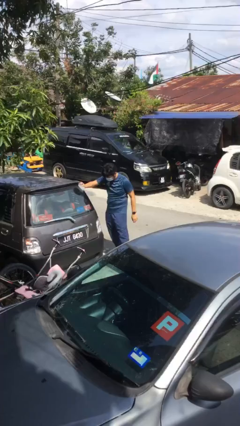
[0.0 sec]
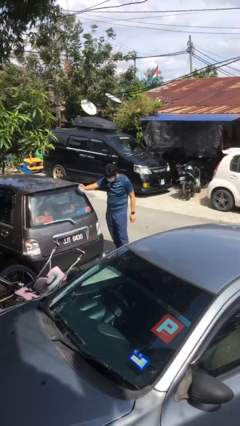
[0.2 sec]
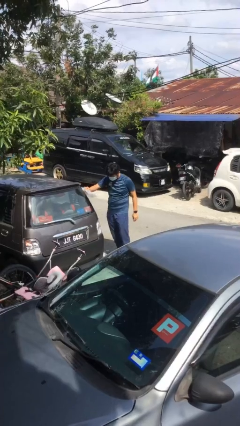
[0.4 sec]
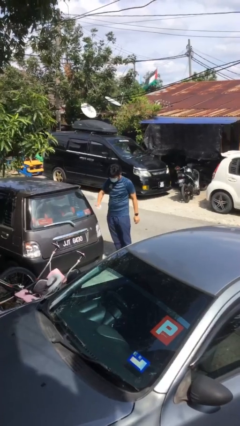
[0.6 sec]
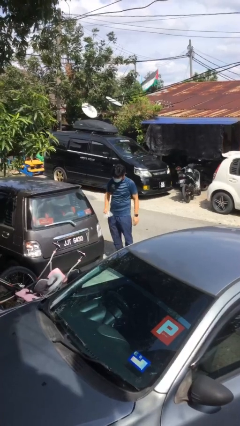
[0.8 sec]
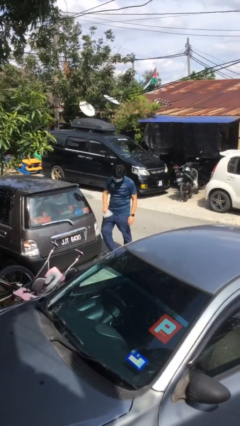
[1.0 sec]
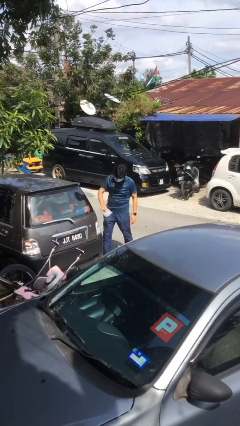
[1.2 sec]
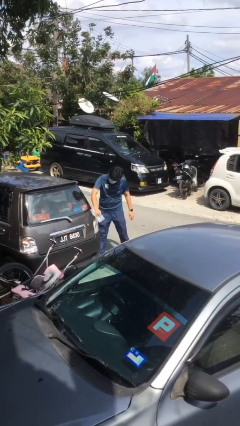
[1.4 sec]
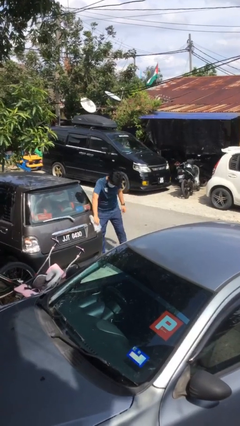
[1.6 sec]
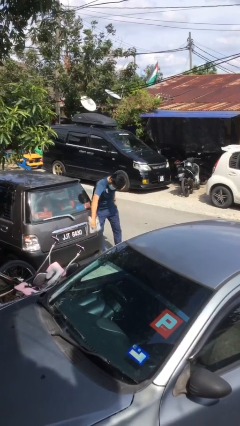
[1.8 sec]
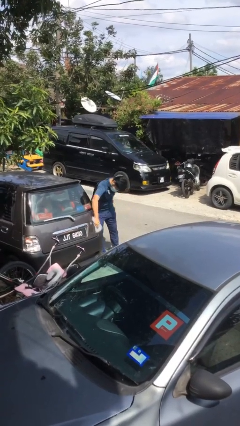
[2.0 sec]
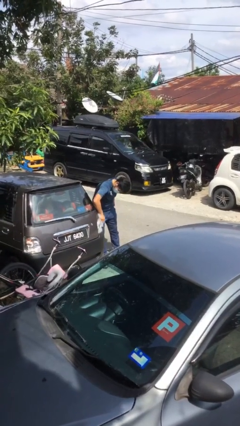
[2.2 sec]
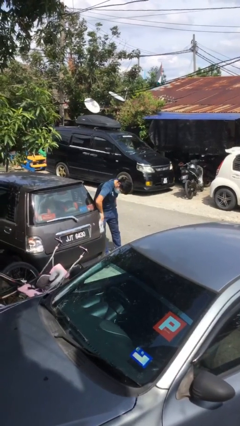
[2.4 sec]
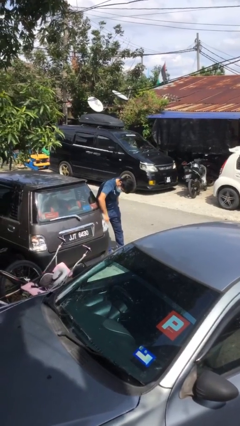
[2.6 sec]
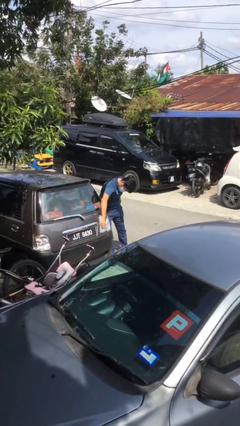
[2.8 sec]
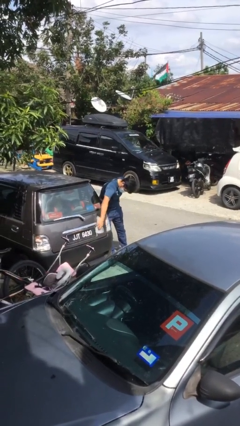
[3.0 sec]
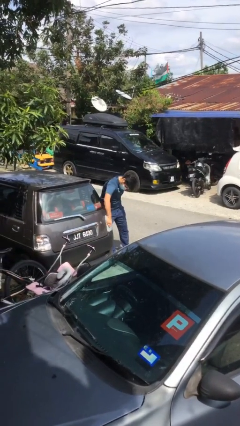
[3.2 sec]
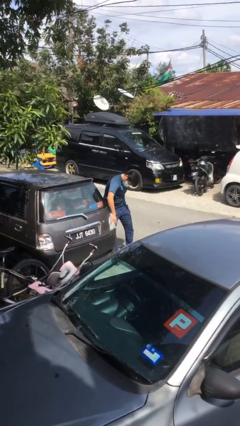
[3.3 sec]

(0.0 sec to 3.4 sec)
person polishes car with rag

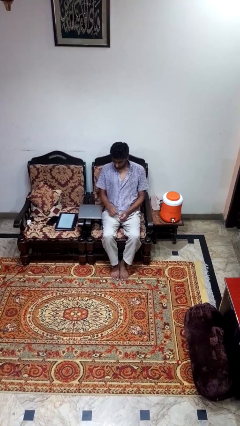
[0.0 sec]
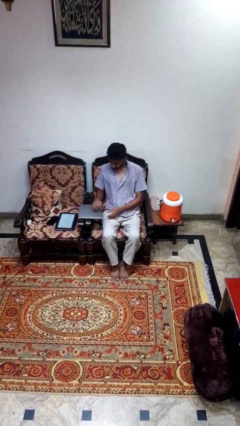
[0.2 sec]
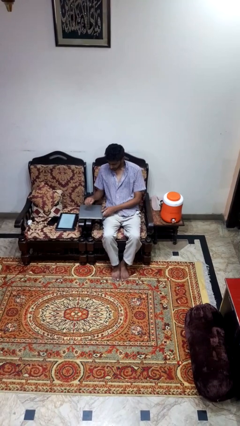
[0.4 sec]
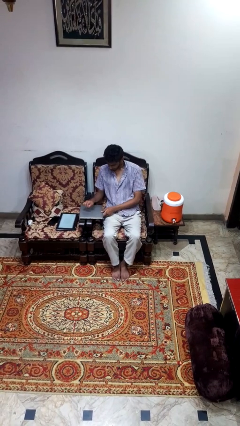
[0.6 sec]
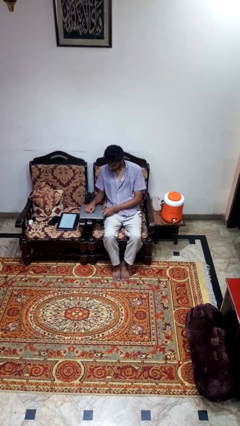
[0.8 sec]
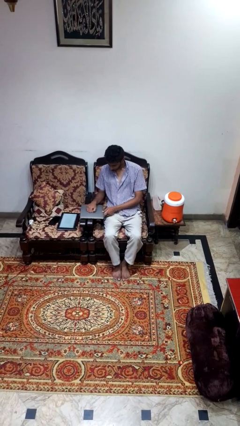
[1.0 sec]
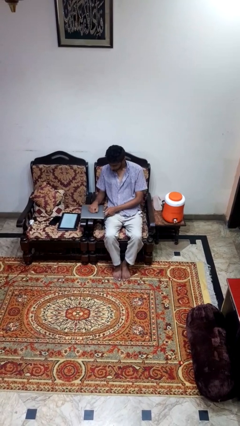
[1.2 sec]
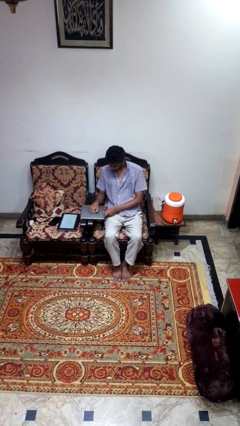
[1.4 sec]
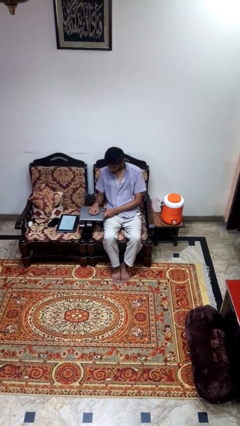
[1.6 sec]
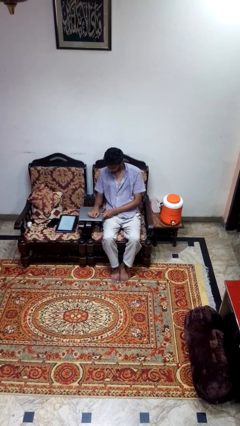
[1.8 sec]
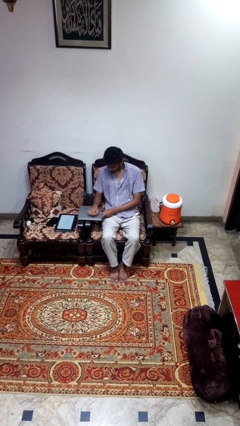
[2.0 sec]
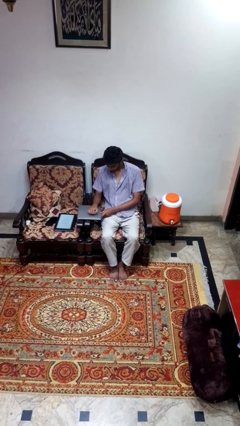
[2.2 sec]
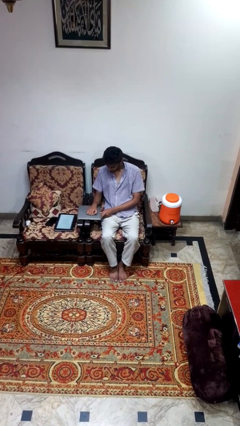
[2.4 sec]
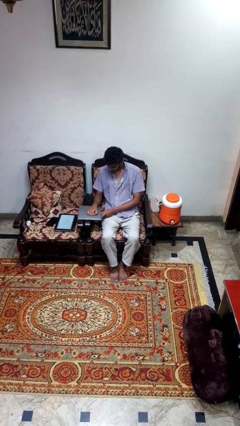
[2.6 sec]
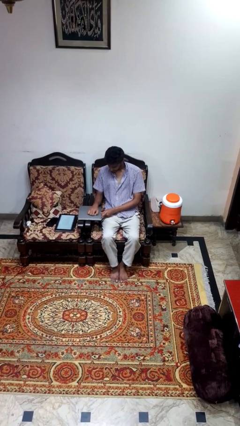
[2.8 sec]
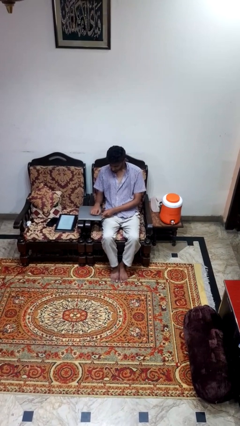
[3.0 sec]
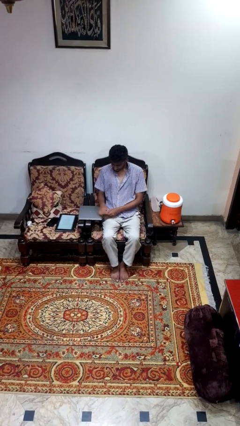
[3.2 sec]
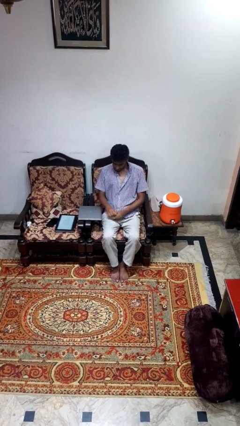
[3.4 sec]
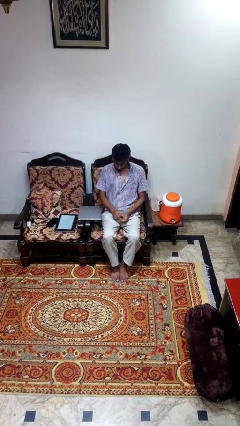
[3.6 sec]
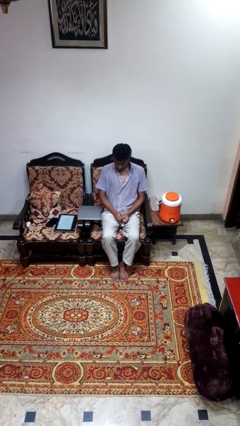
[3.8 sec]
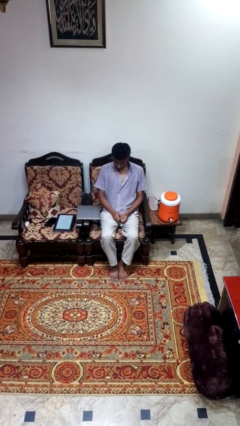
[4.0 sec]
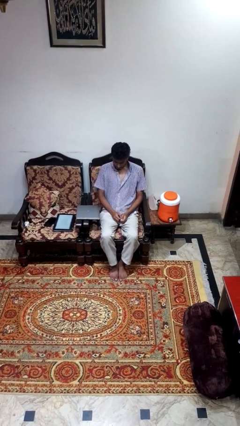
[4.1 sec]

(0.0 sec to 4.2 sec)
person taps object with finger

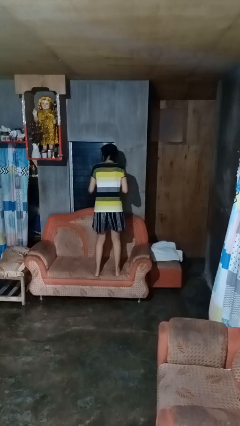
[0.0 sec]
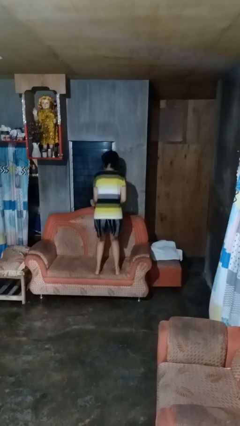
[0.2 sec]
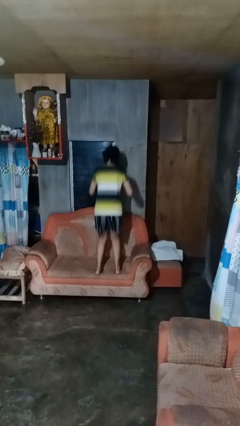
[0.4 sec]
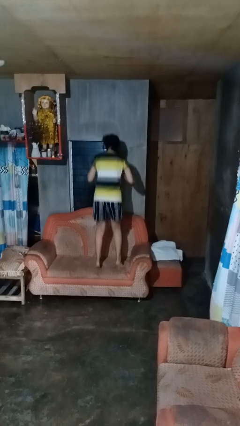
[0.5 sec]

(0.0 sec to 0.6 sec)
person jumps on couch

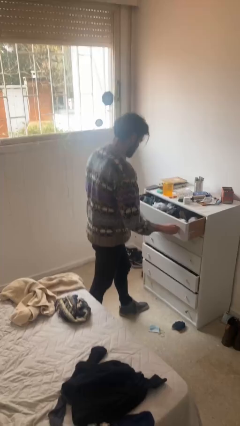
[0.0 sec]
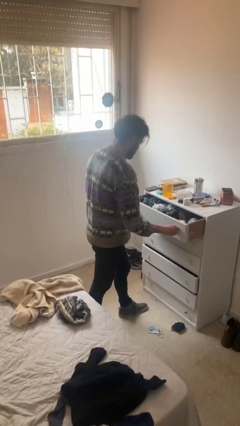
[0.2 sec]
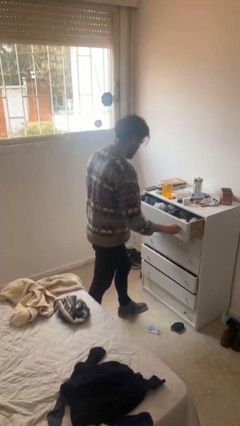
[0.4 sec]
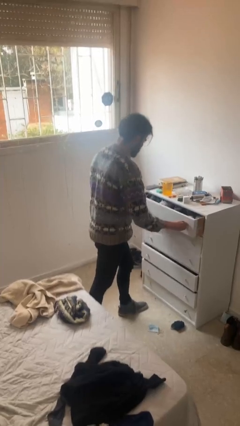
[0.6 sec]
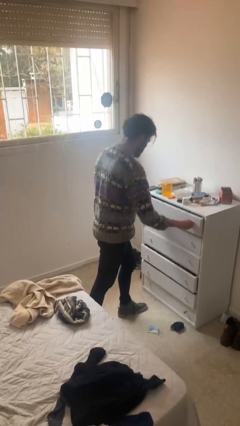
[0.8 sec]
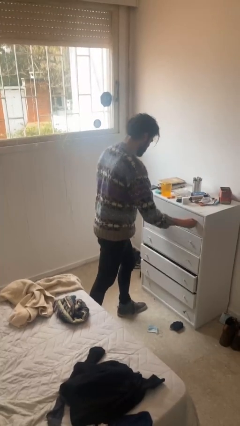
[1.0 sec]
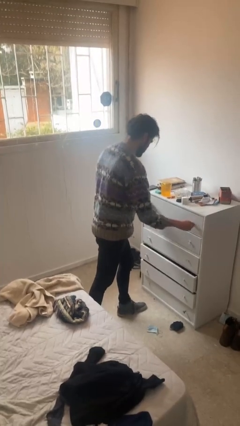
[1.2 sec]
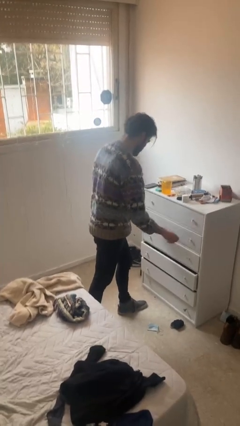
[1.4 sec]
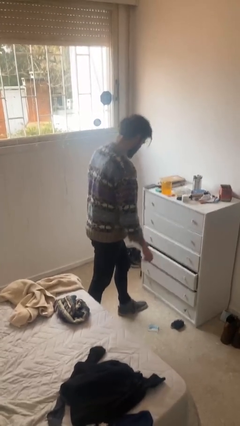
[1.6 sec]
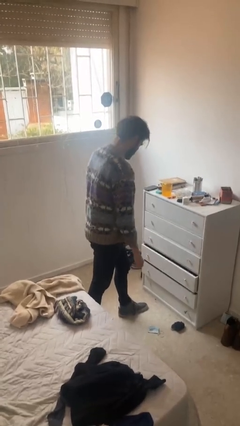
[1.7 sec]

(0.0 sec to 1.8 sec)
person closes dresser drawer

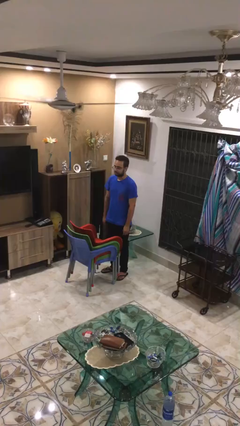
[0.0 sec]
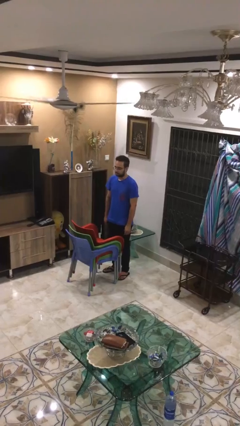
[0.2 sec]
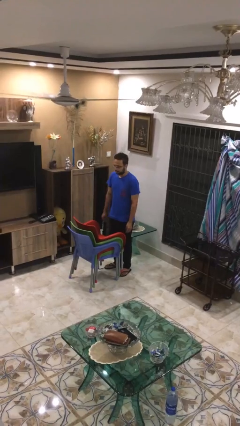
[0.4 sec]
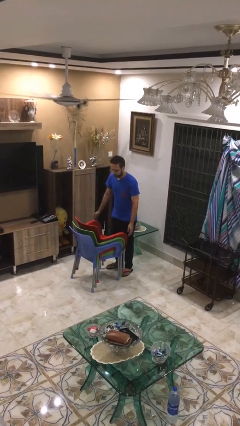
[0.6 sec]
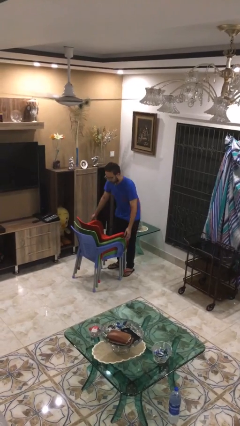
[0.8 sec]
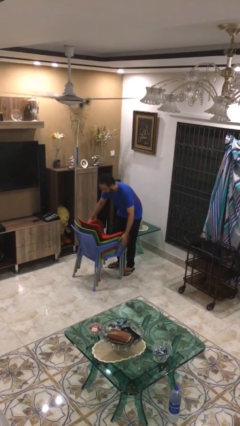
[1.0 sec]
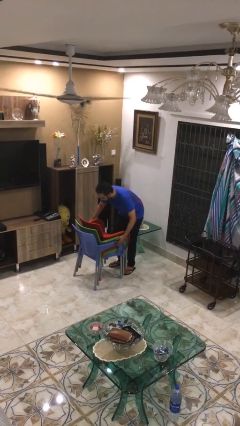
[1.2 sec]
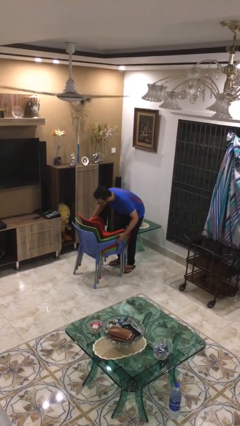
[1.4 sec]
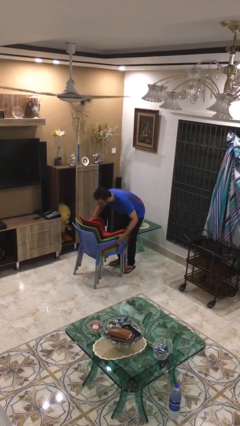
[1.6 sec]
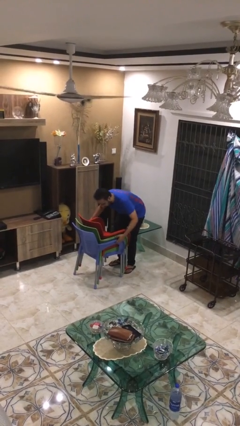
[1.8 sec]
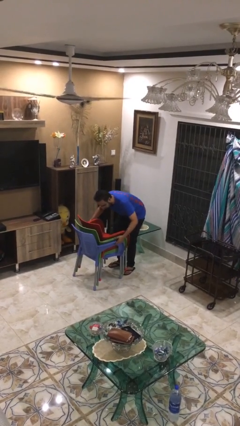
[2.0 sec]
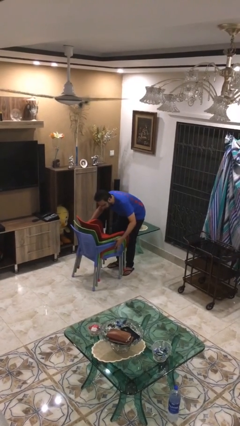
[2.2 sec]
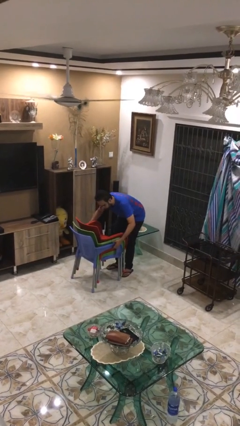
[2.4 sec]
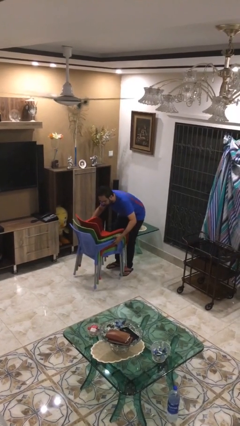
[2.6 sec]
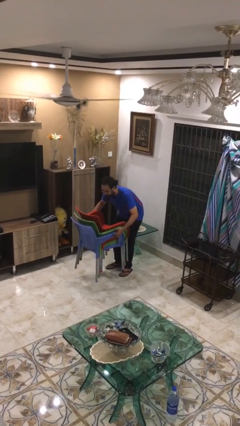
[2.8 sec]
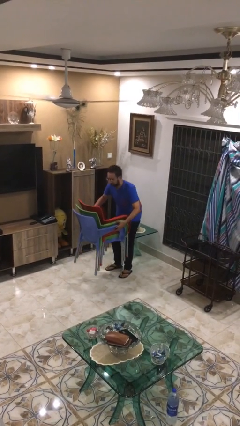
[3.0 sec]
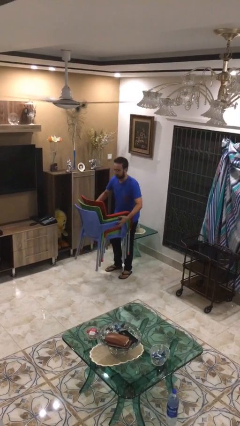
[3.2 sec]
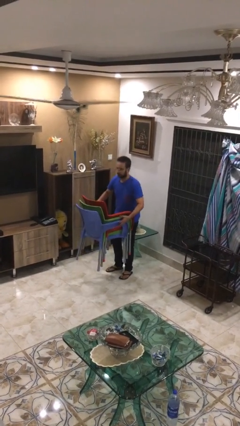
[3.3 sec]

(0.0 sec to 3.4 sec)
person picks up object from floor

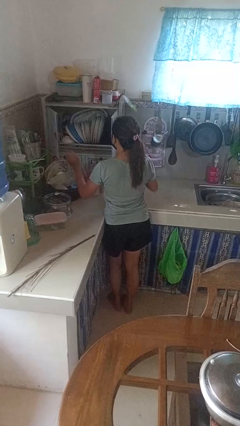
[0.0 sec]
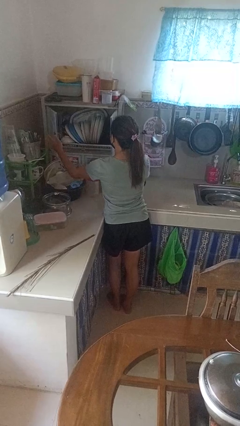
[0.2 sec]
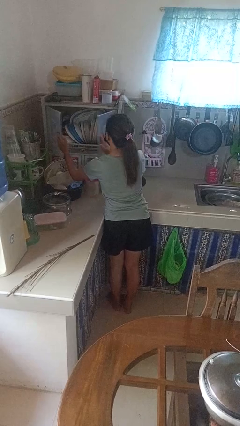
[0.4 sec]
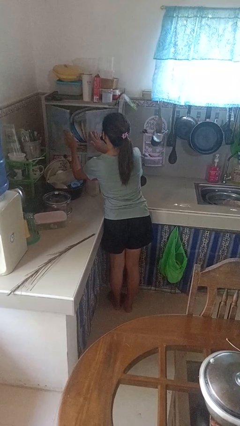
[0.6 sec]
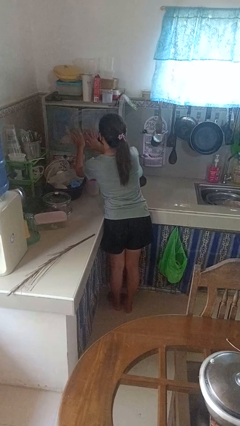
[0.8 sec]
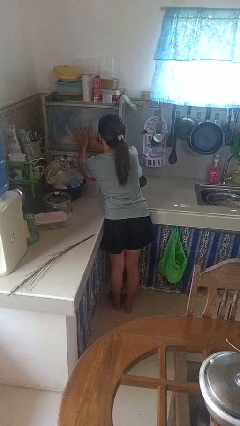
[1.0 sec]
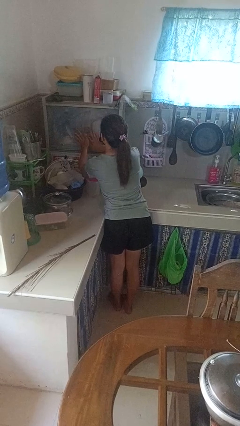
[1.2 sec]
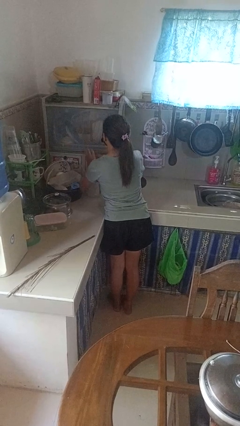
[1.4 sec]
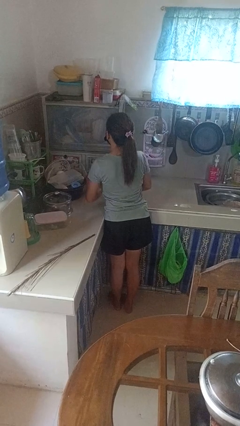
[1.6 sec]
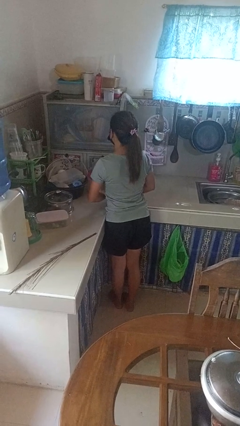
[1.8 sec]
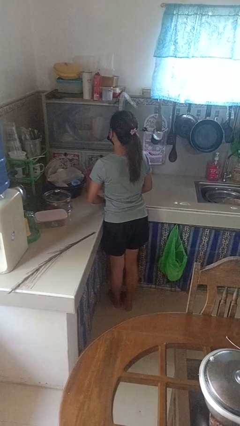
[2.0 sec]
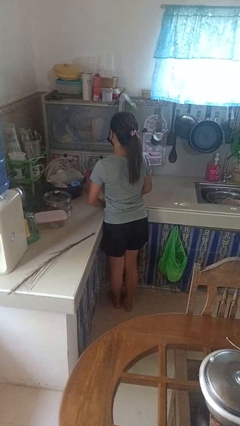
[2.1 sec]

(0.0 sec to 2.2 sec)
person closes clothes washer

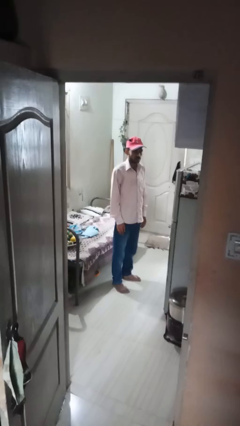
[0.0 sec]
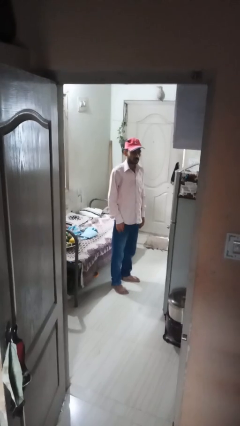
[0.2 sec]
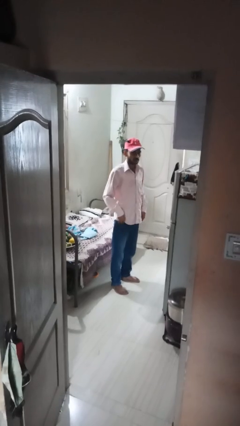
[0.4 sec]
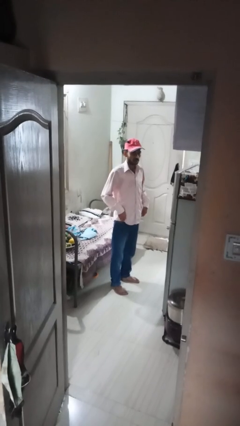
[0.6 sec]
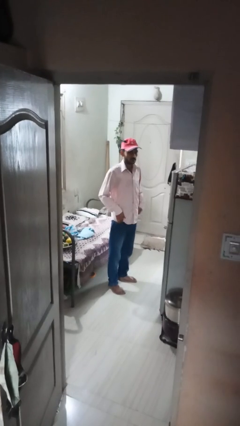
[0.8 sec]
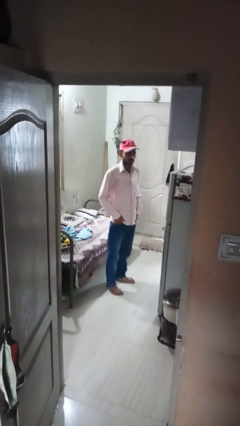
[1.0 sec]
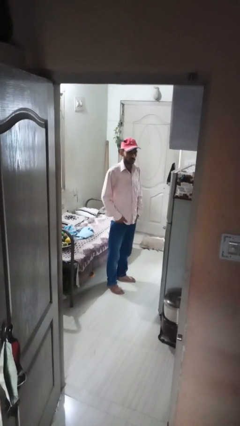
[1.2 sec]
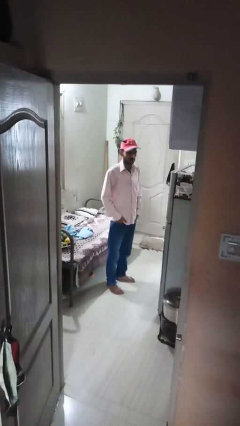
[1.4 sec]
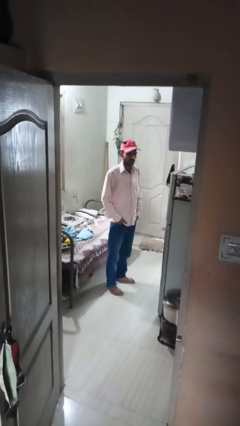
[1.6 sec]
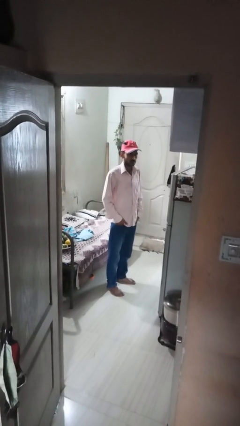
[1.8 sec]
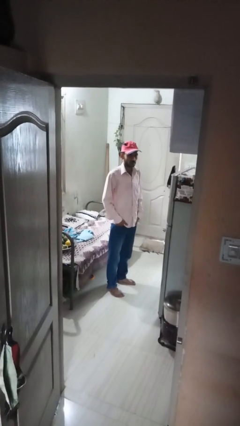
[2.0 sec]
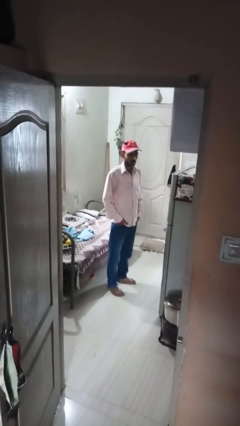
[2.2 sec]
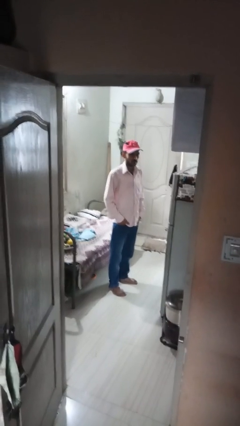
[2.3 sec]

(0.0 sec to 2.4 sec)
person puts hands in back pockets
